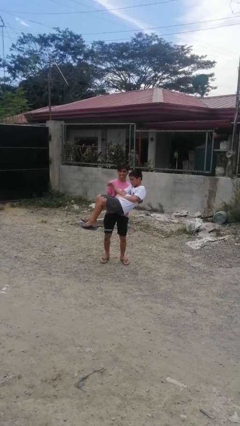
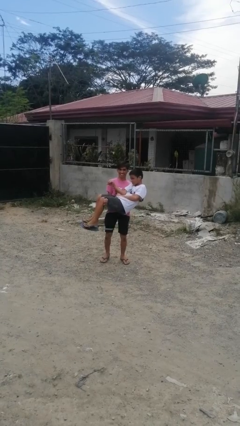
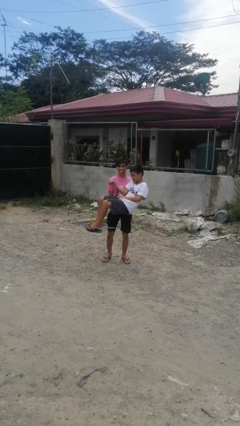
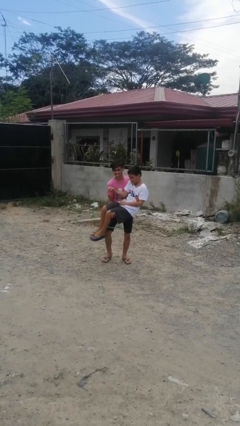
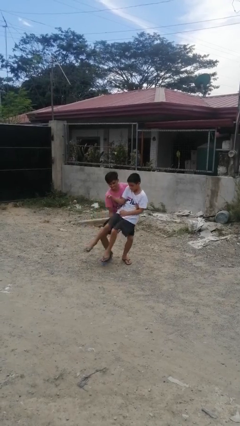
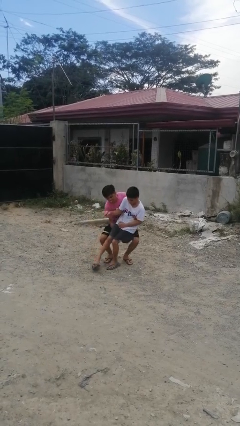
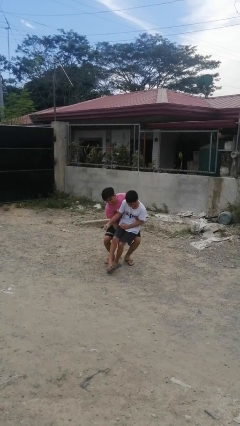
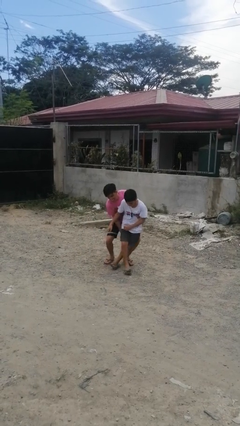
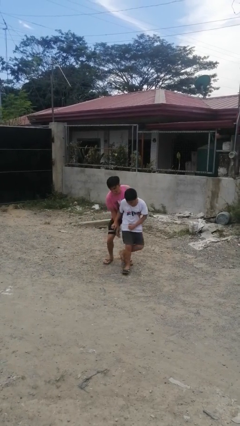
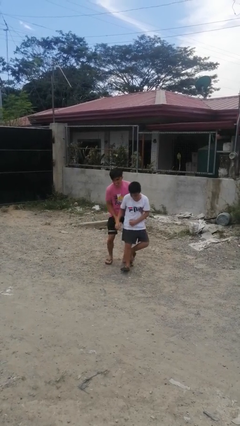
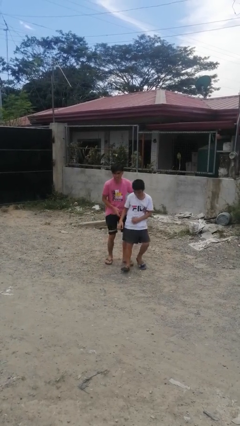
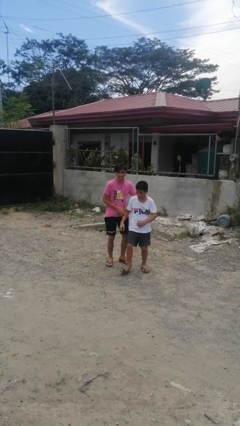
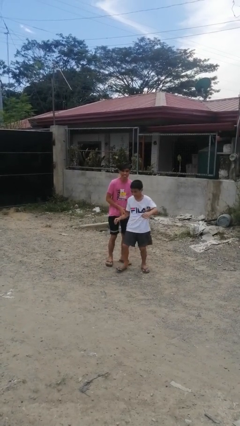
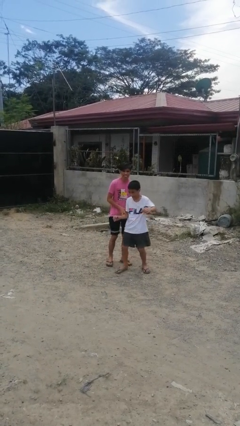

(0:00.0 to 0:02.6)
person puts down person

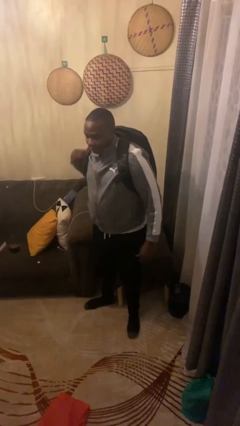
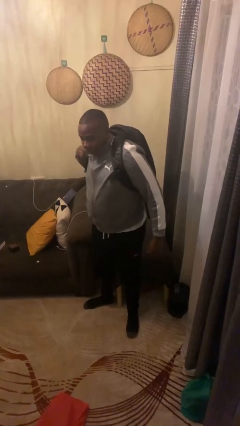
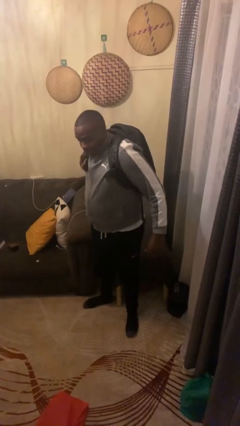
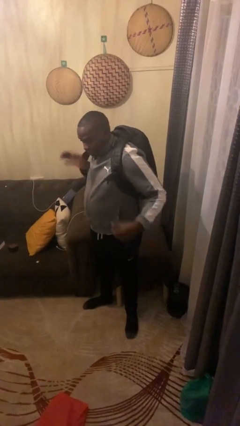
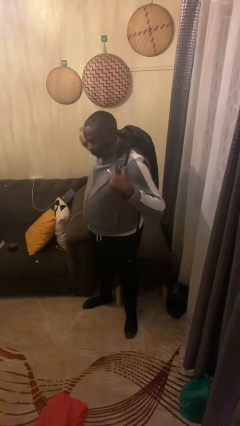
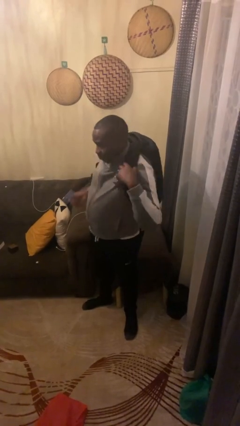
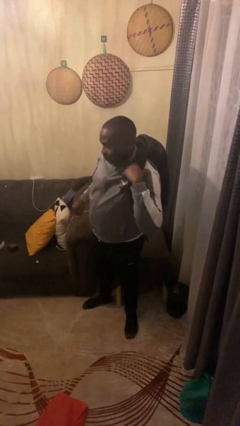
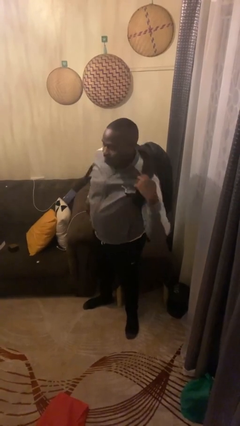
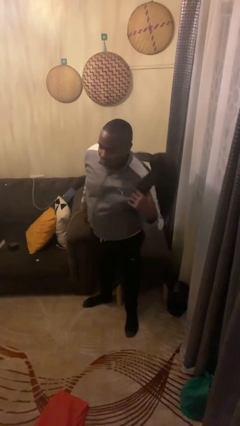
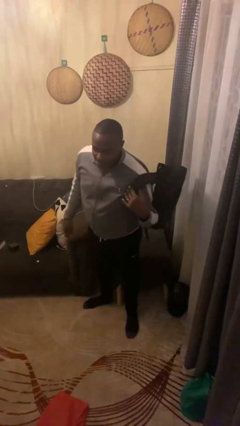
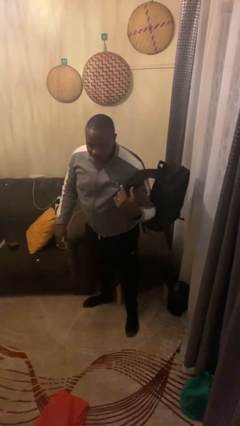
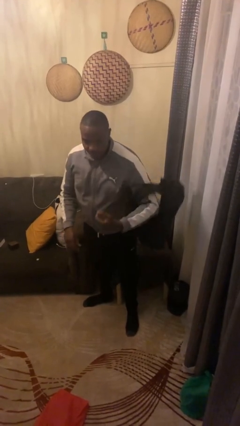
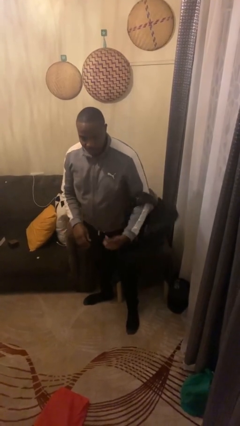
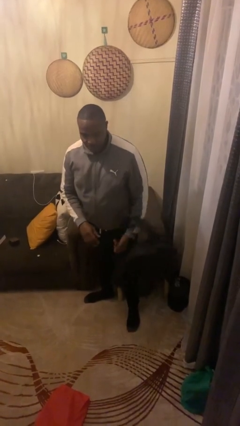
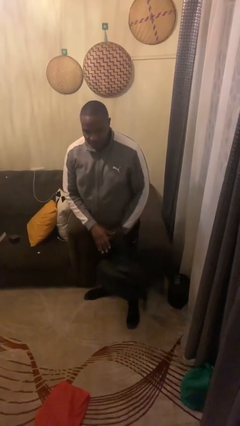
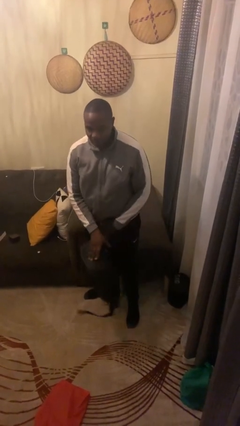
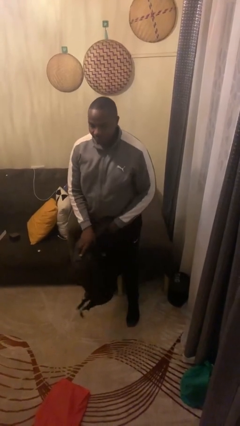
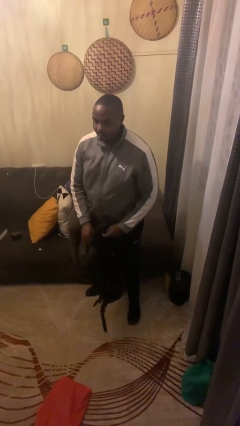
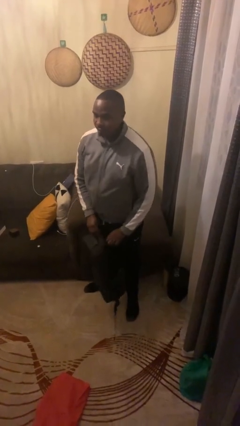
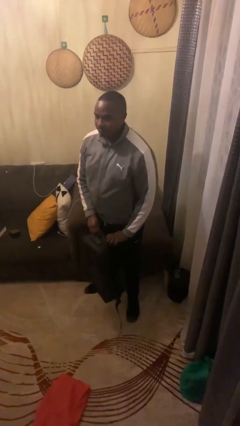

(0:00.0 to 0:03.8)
person takes off backpack

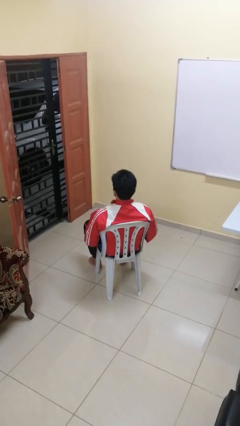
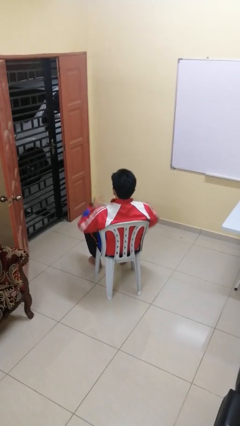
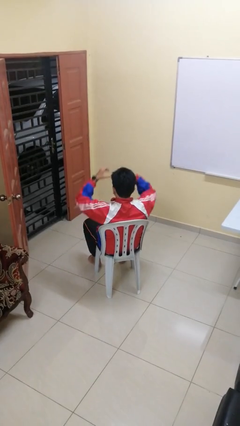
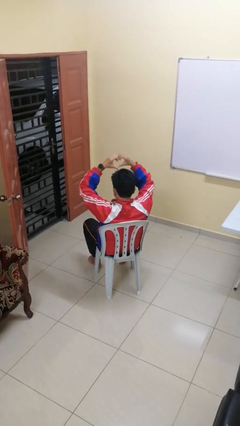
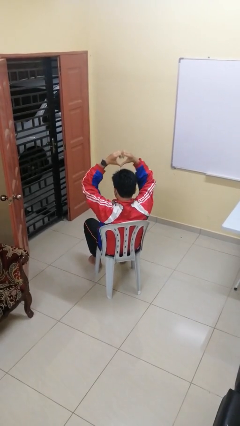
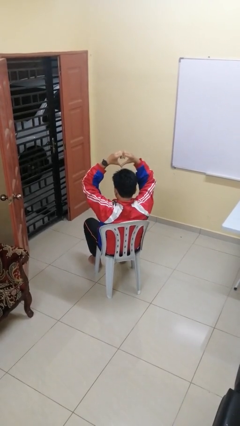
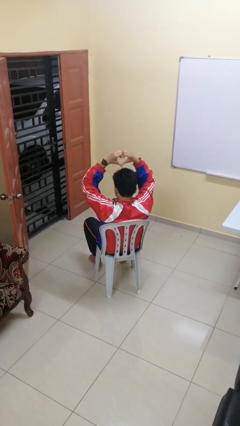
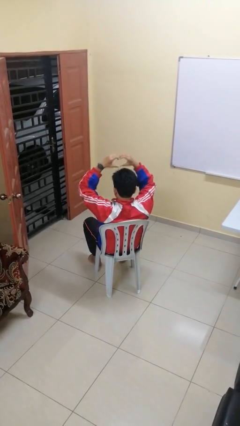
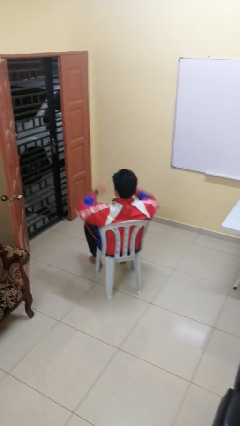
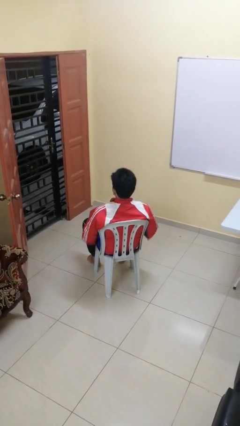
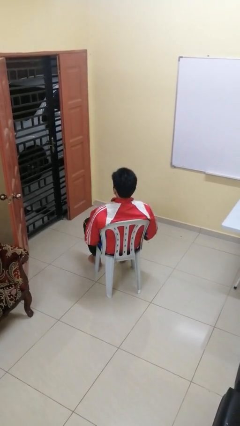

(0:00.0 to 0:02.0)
person gestures heart

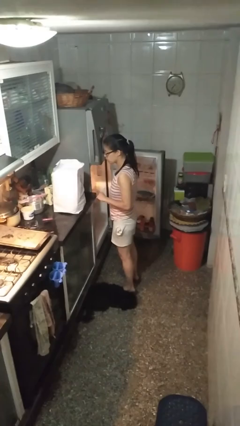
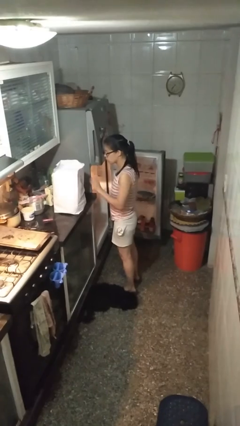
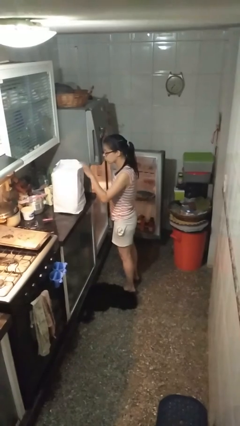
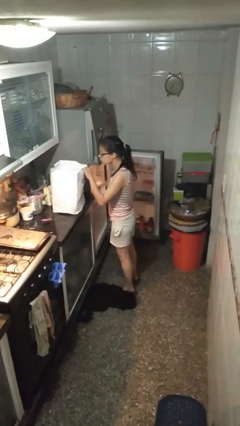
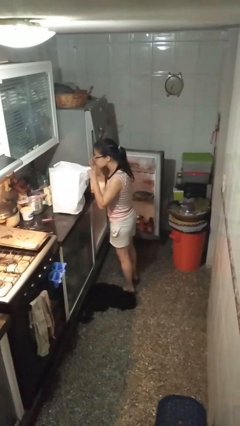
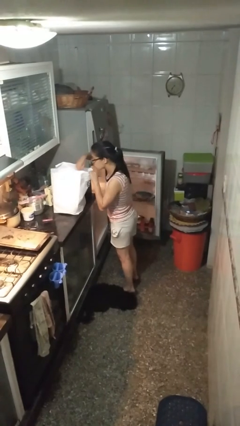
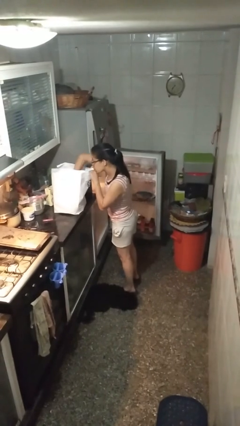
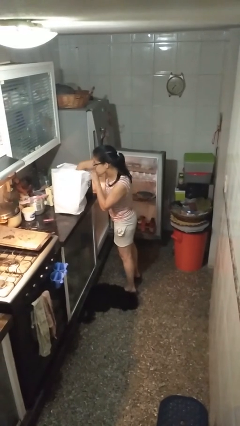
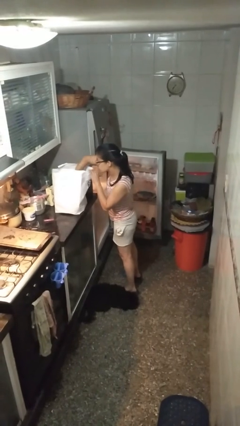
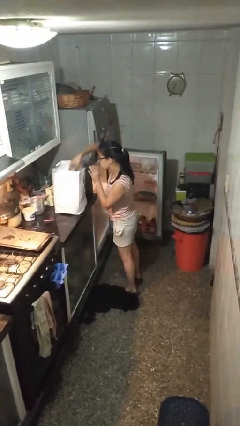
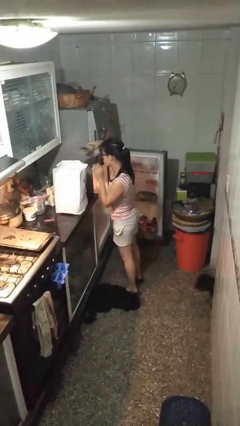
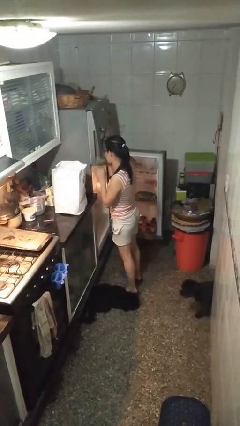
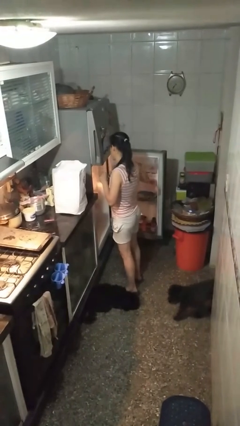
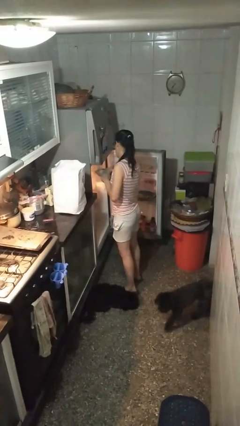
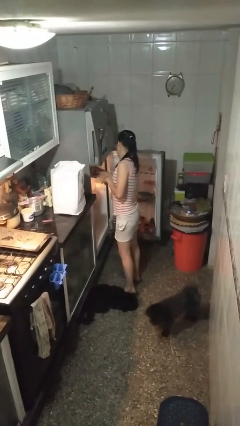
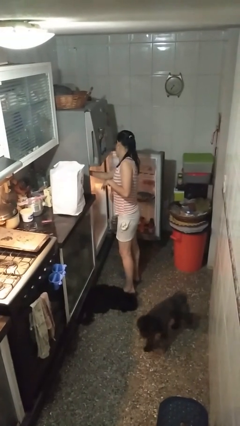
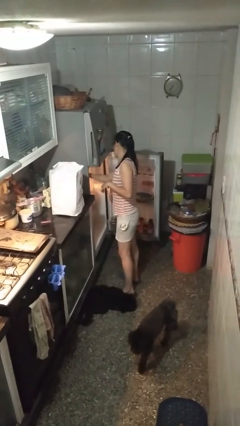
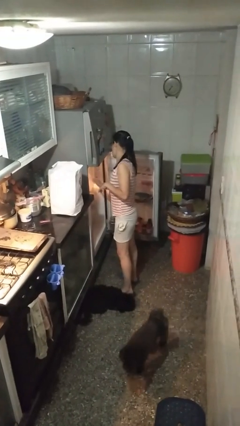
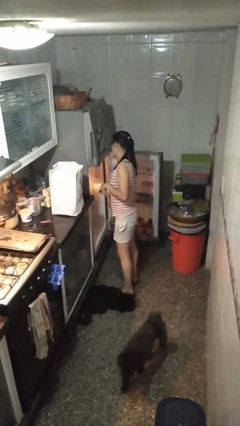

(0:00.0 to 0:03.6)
person loads groceries into refrigerator

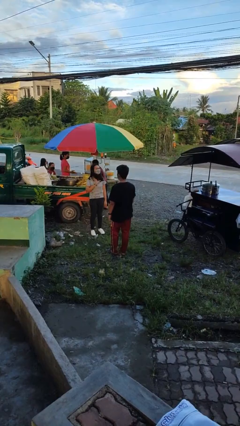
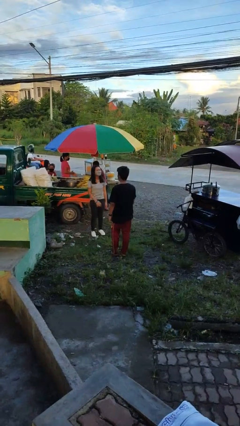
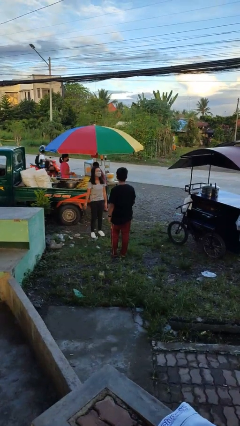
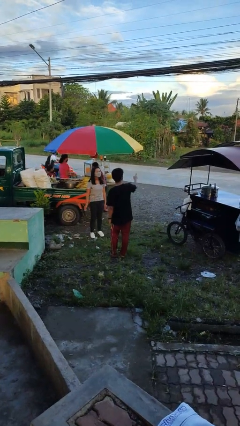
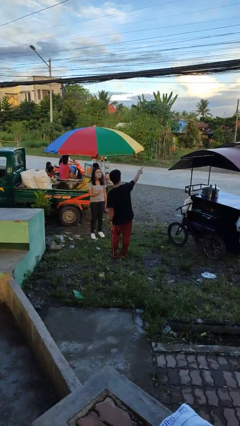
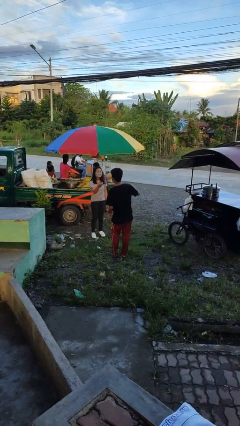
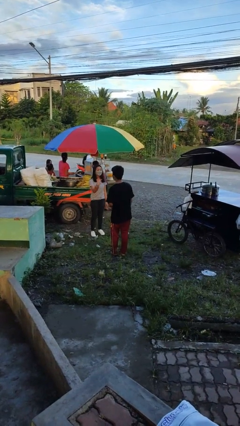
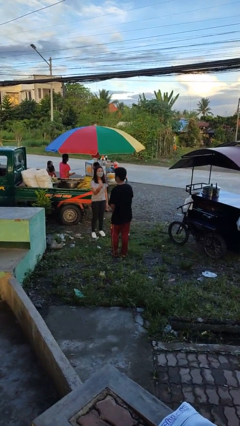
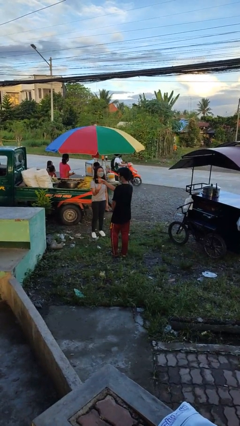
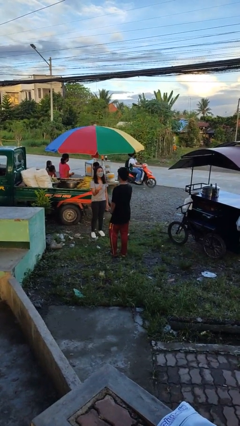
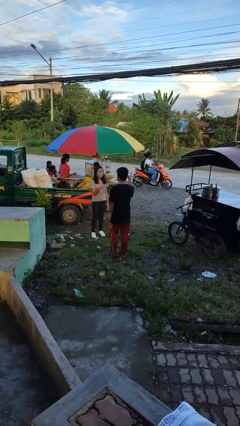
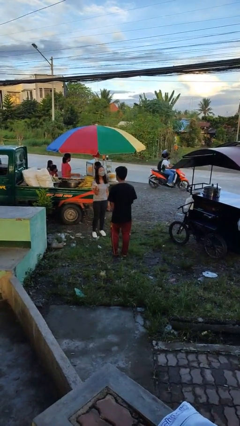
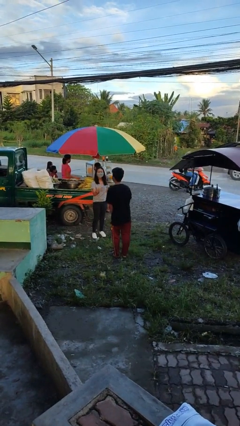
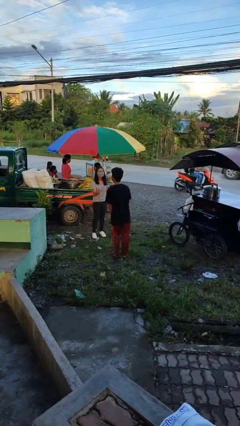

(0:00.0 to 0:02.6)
person talks to person

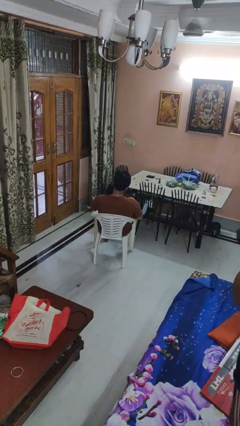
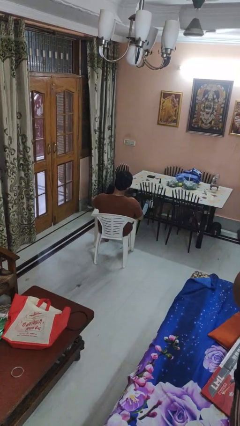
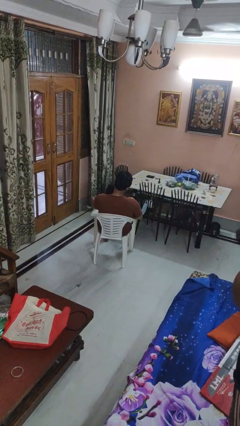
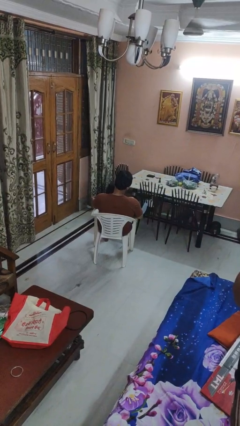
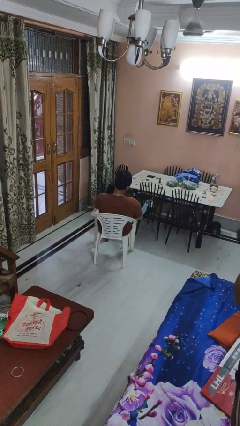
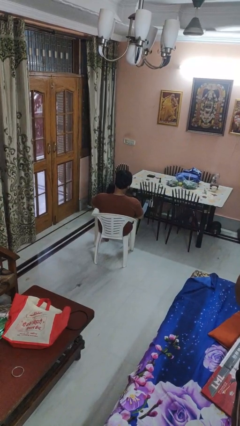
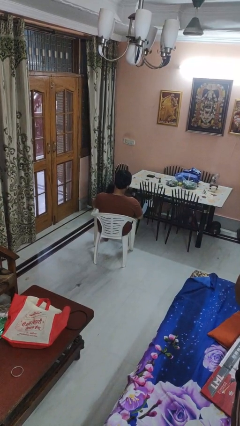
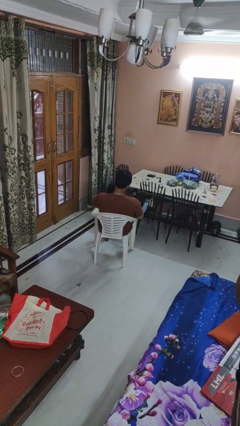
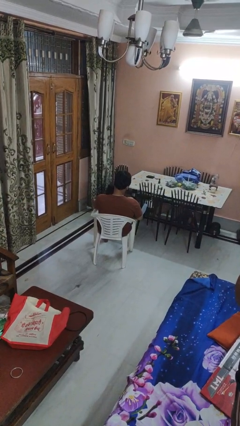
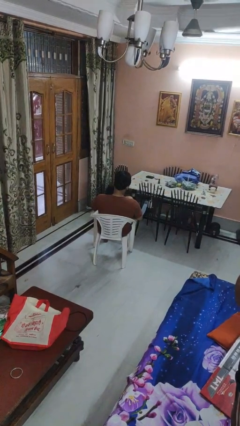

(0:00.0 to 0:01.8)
person rubs foot

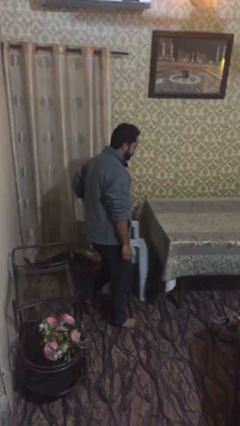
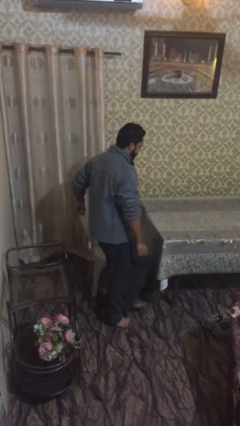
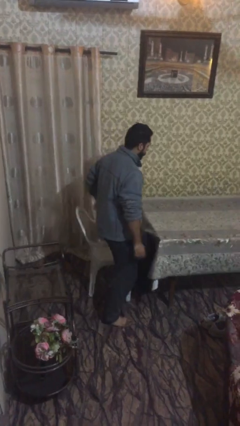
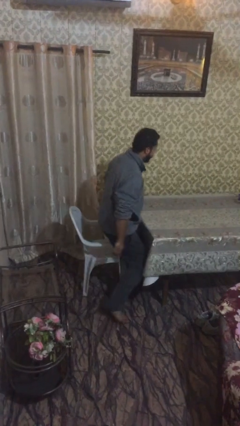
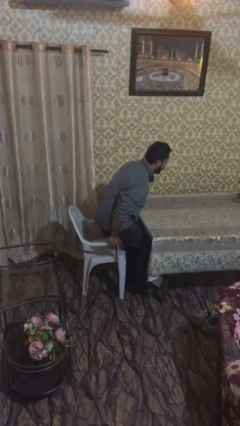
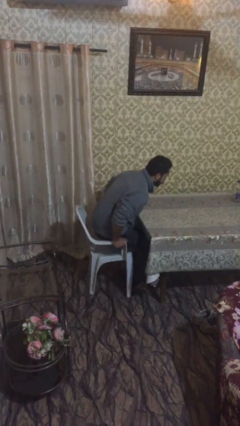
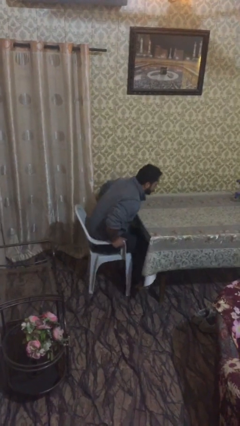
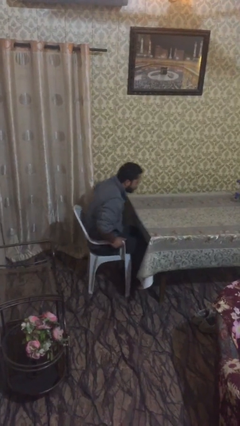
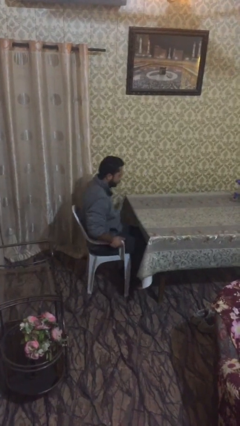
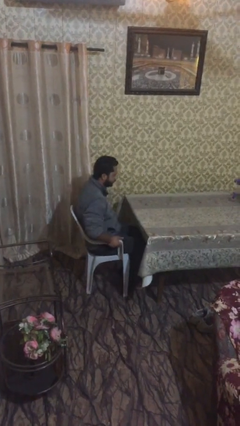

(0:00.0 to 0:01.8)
person sits down
